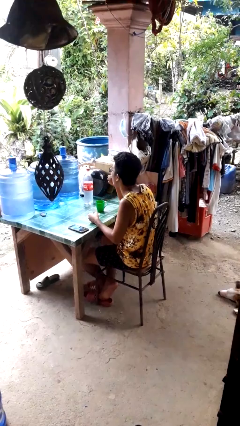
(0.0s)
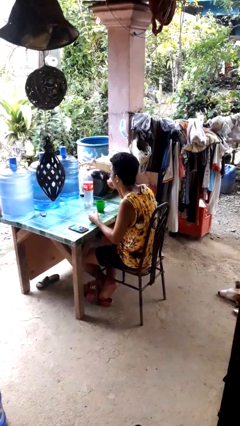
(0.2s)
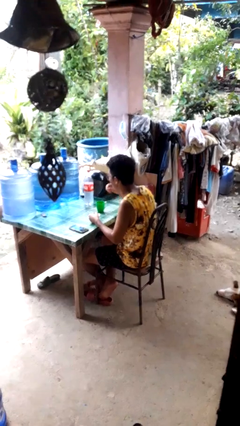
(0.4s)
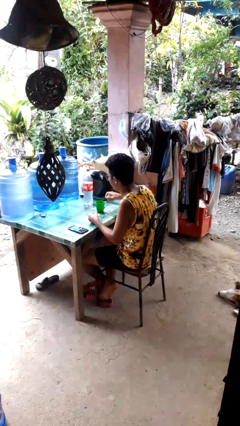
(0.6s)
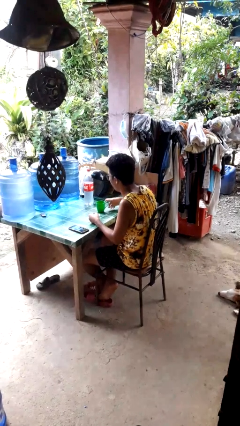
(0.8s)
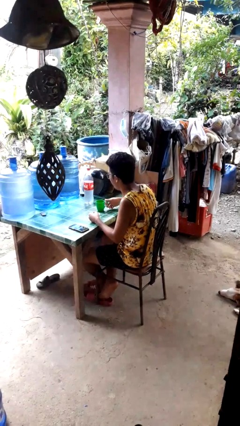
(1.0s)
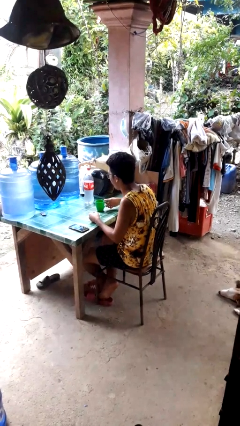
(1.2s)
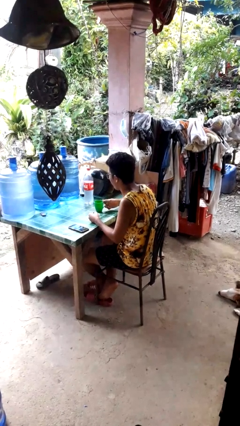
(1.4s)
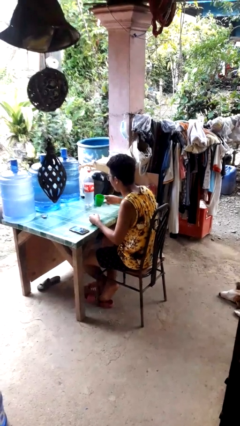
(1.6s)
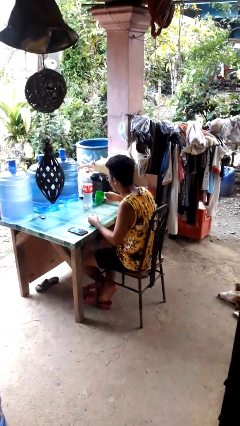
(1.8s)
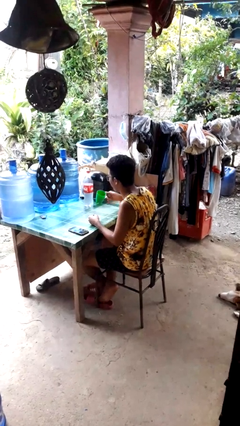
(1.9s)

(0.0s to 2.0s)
person takes medicine pills

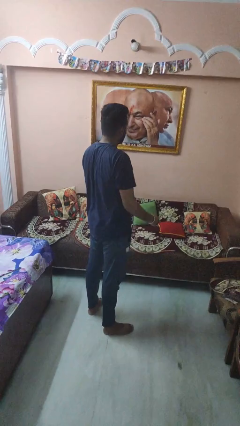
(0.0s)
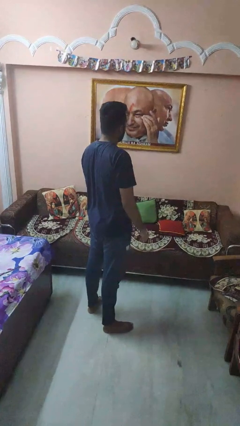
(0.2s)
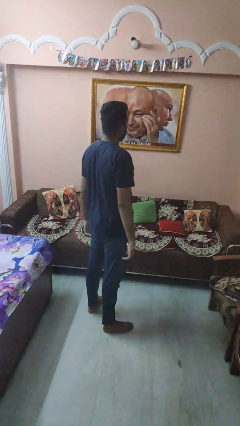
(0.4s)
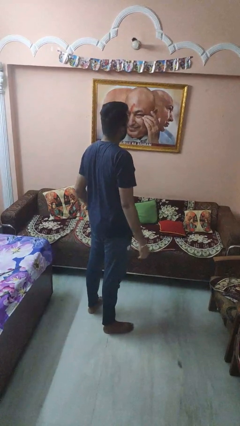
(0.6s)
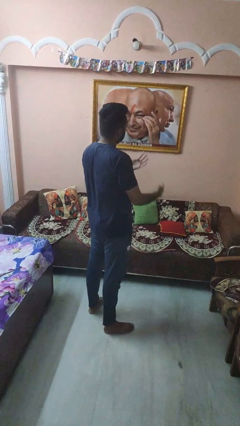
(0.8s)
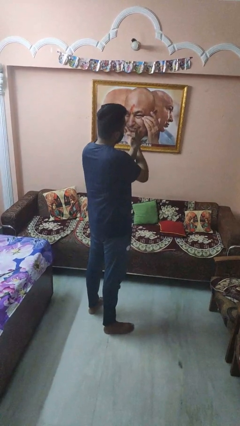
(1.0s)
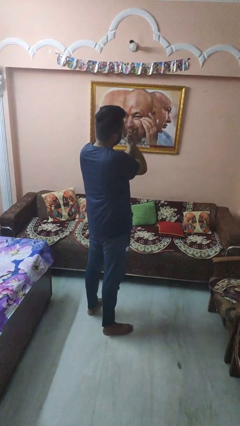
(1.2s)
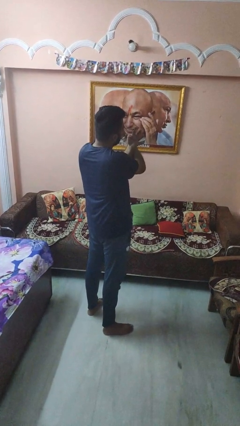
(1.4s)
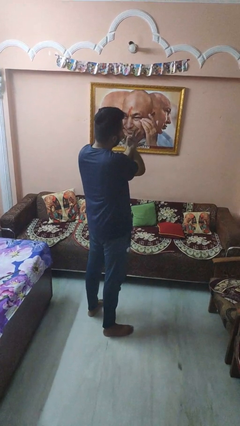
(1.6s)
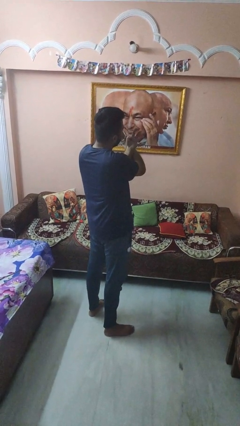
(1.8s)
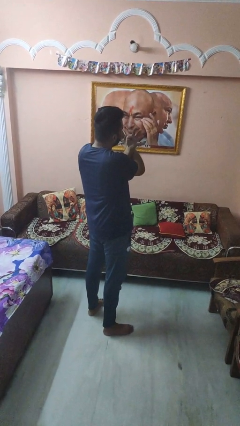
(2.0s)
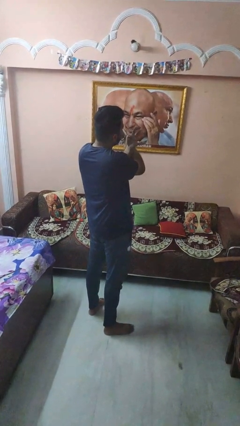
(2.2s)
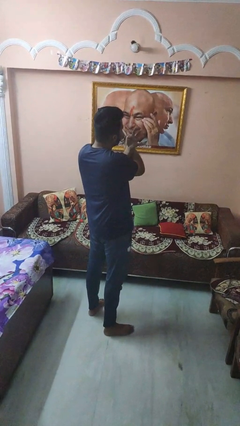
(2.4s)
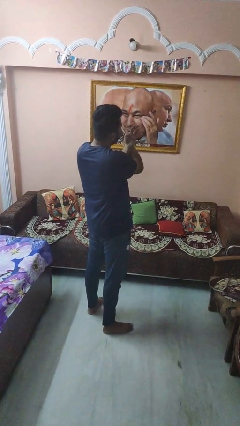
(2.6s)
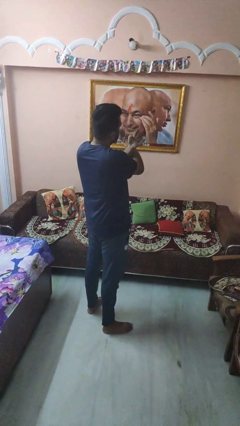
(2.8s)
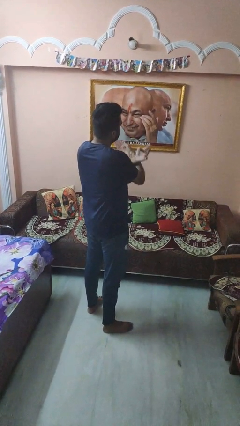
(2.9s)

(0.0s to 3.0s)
person gestures arms x

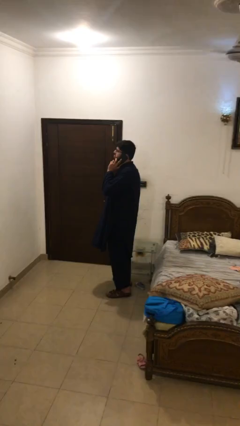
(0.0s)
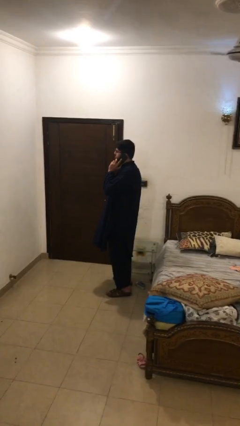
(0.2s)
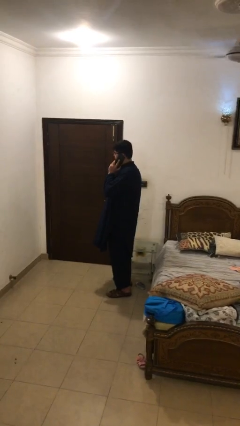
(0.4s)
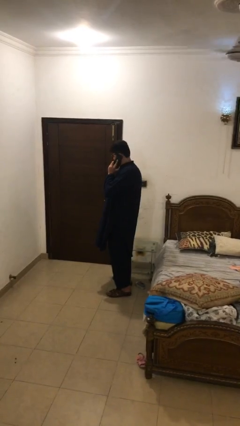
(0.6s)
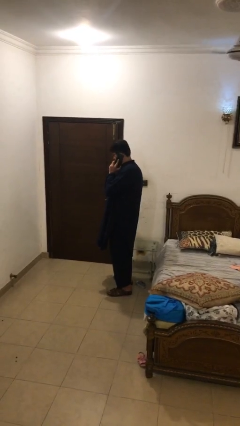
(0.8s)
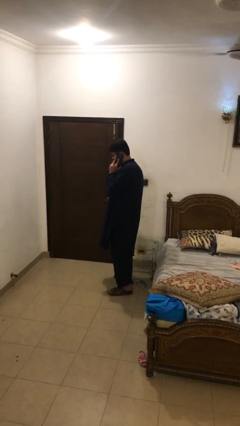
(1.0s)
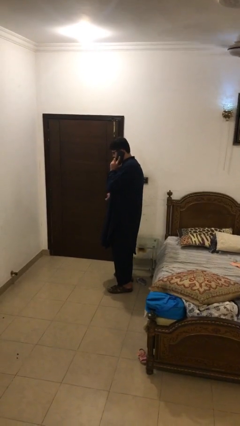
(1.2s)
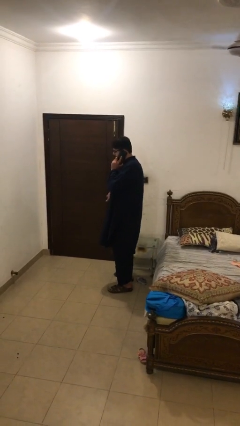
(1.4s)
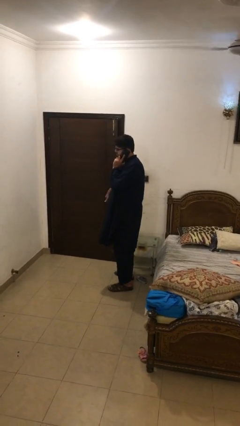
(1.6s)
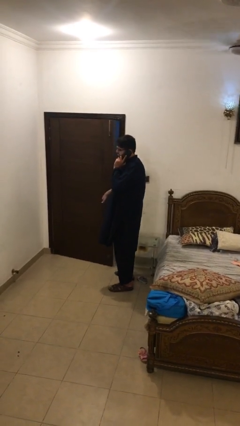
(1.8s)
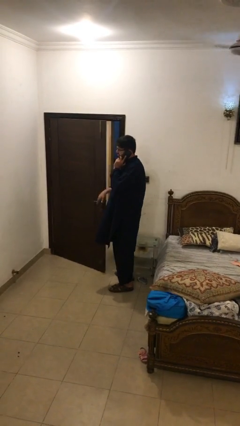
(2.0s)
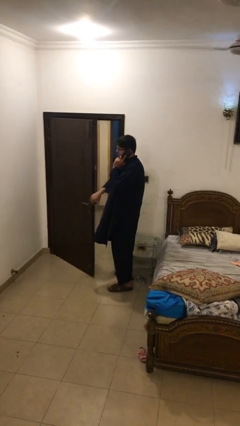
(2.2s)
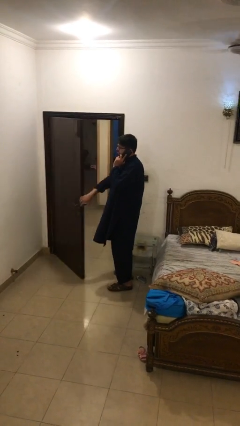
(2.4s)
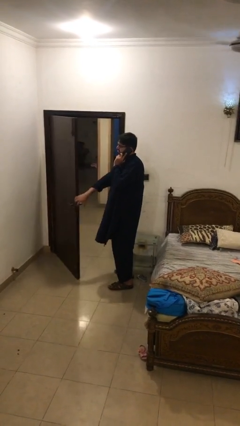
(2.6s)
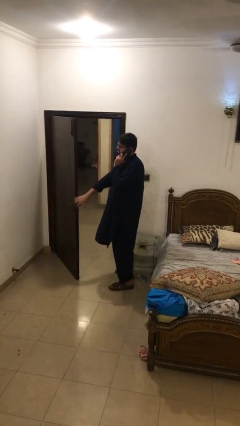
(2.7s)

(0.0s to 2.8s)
person opens facility door

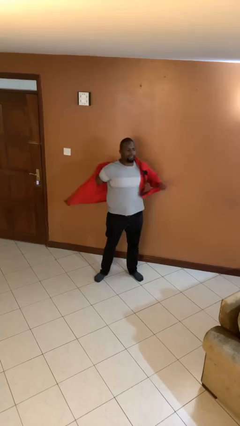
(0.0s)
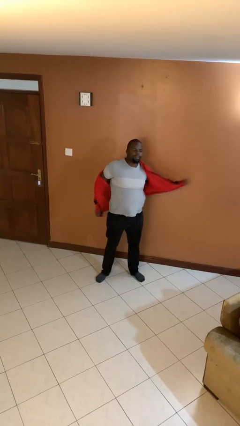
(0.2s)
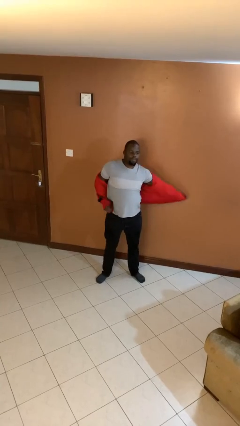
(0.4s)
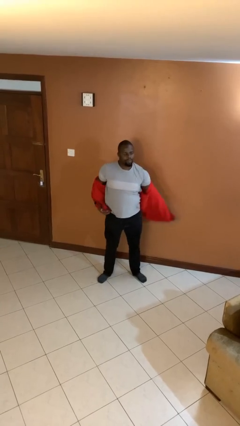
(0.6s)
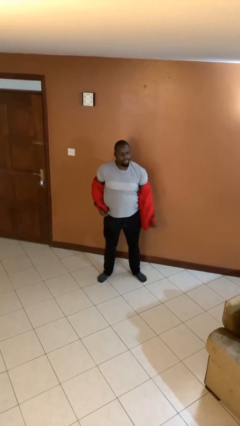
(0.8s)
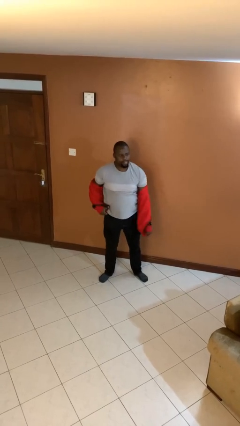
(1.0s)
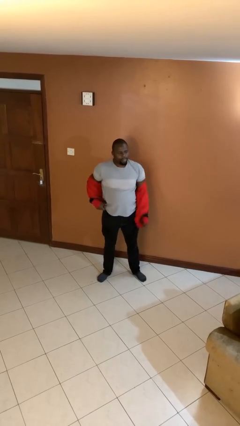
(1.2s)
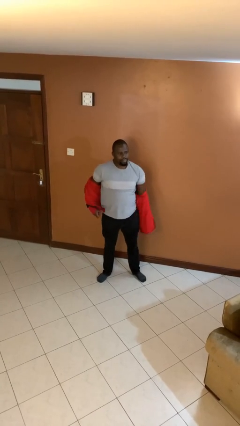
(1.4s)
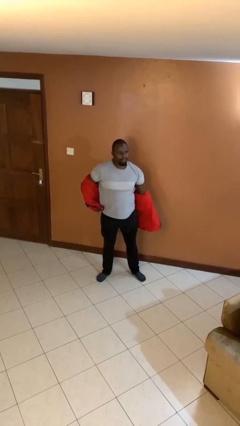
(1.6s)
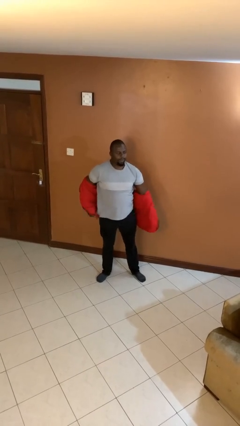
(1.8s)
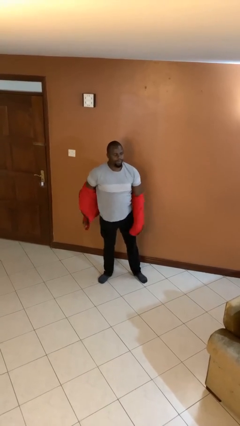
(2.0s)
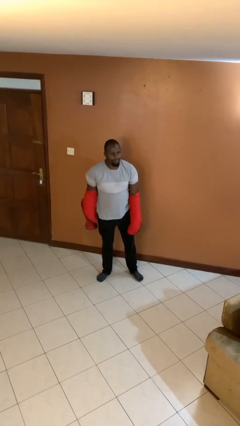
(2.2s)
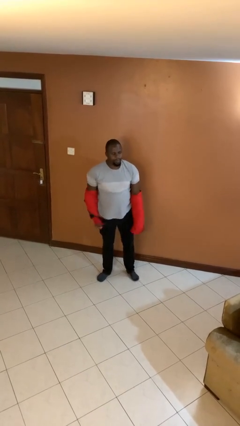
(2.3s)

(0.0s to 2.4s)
person takes off jacket

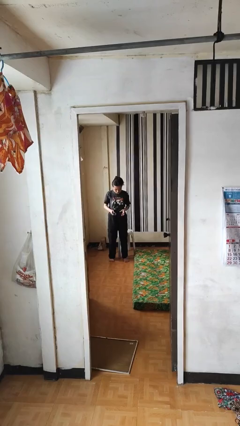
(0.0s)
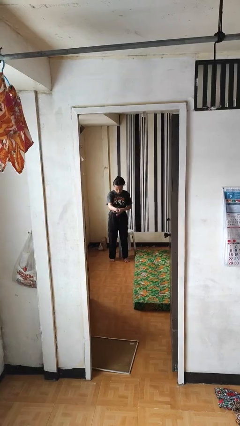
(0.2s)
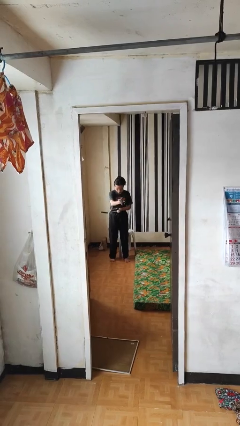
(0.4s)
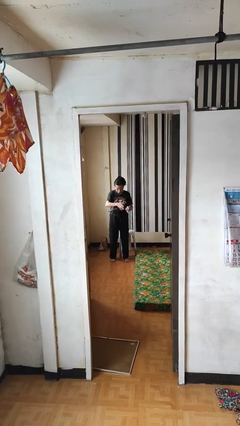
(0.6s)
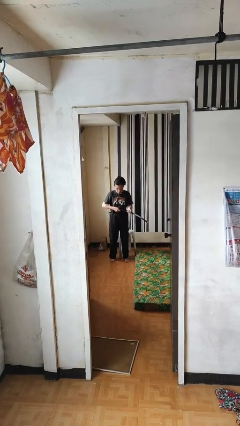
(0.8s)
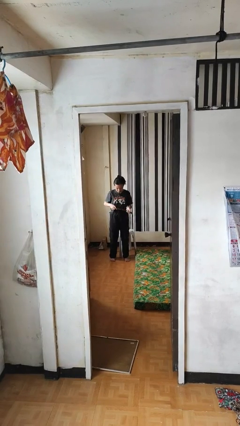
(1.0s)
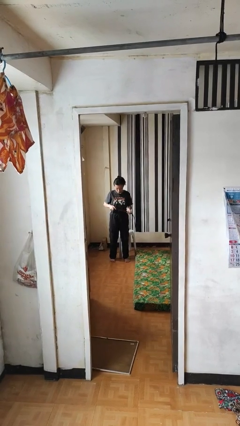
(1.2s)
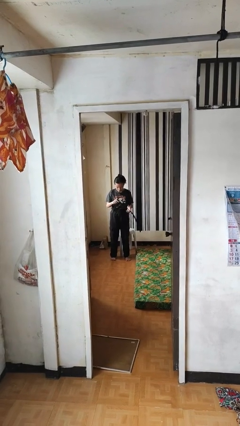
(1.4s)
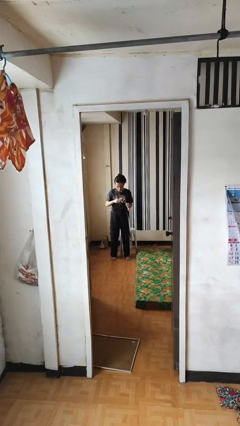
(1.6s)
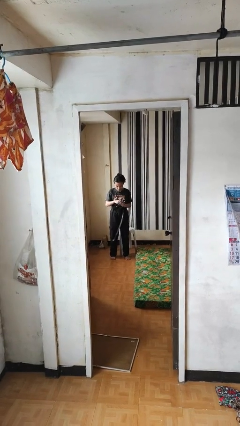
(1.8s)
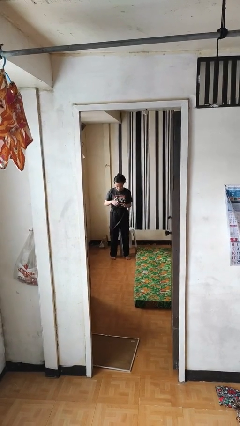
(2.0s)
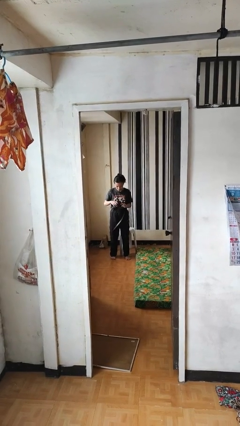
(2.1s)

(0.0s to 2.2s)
person takes off belt

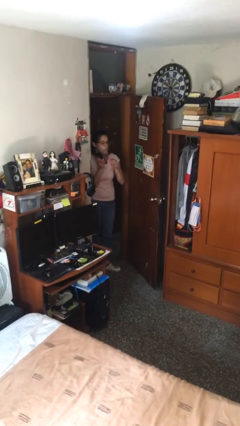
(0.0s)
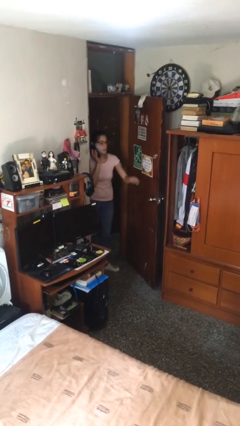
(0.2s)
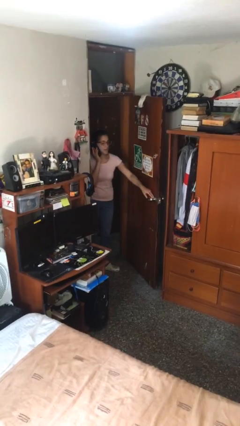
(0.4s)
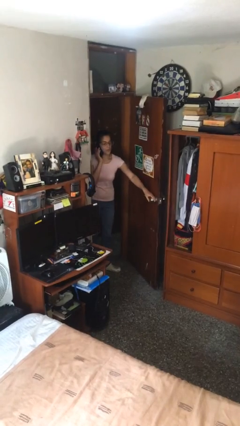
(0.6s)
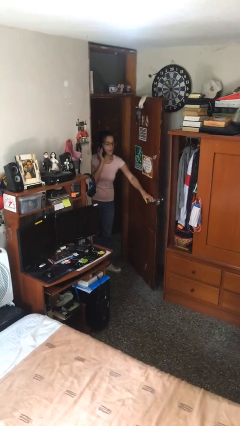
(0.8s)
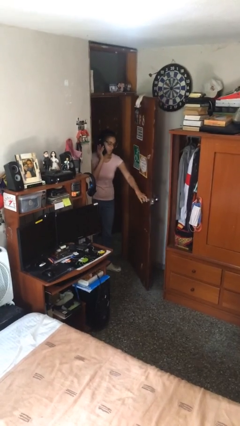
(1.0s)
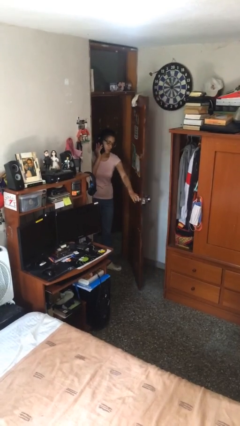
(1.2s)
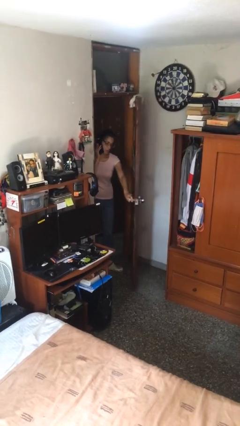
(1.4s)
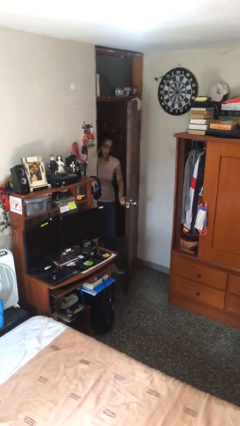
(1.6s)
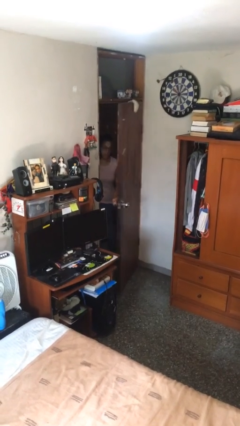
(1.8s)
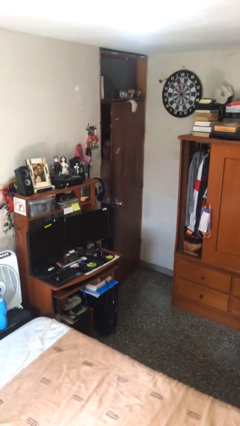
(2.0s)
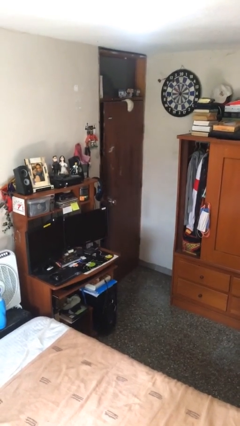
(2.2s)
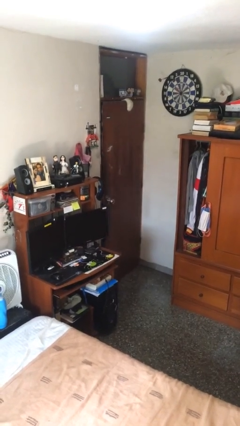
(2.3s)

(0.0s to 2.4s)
person closes facility door

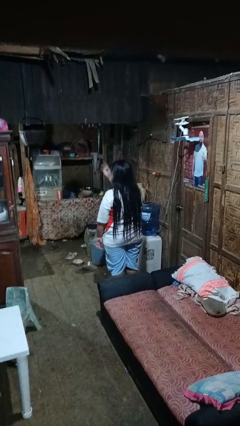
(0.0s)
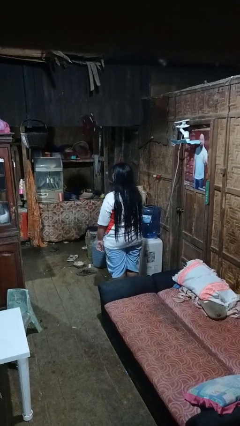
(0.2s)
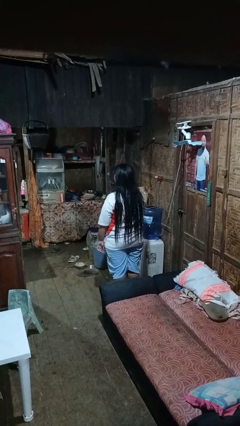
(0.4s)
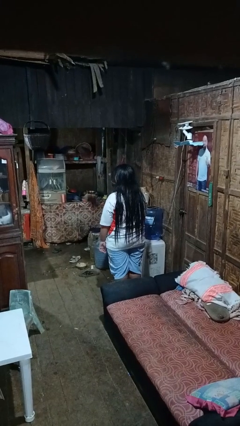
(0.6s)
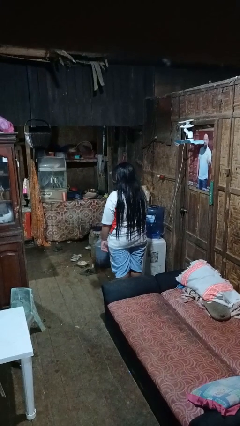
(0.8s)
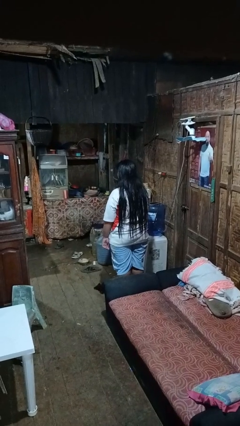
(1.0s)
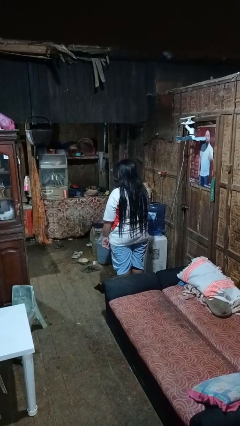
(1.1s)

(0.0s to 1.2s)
person throws object into air

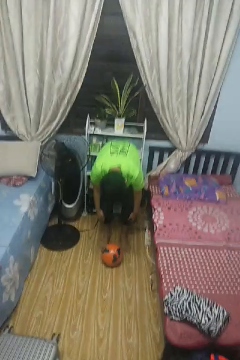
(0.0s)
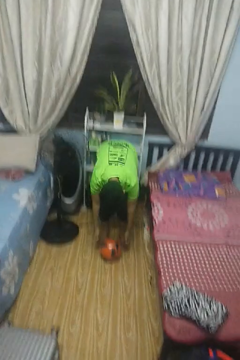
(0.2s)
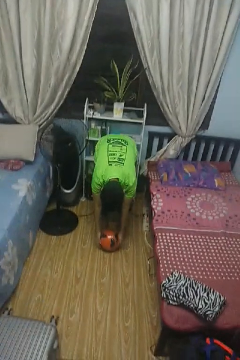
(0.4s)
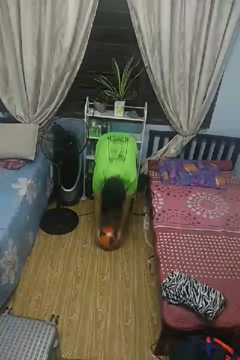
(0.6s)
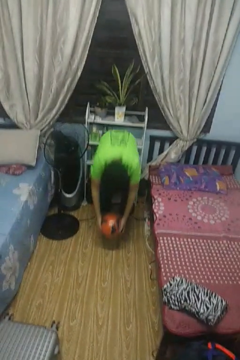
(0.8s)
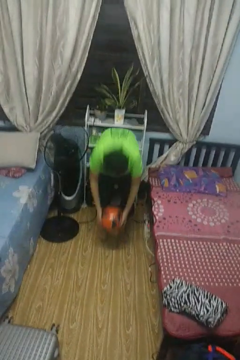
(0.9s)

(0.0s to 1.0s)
person picks up object from floor
